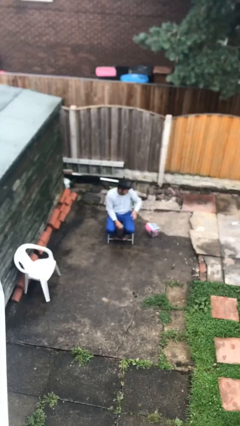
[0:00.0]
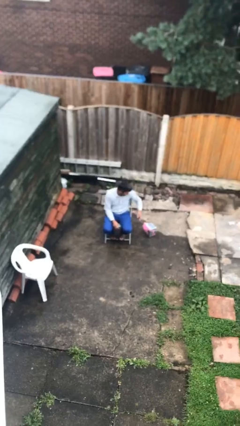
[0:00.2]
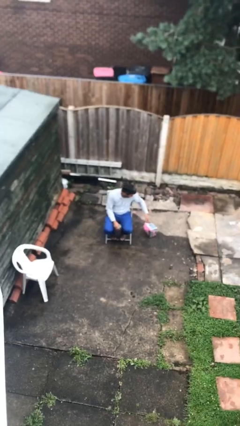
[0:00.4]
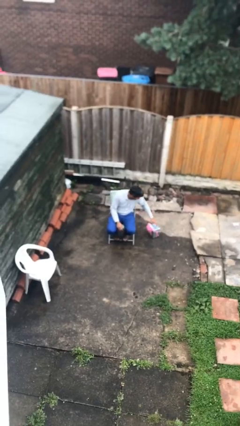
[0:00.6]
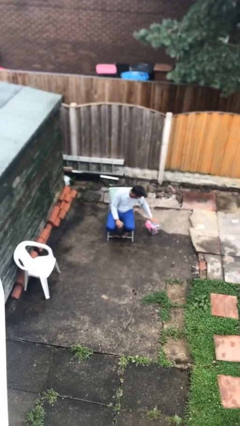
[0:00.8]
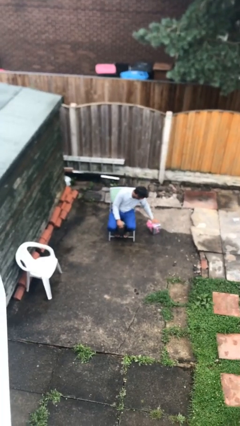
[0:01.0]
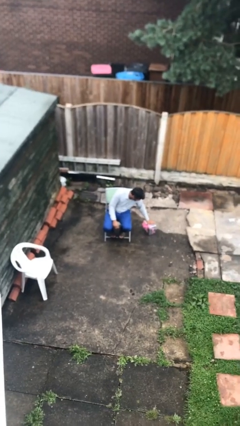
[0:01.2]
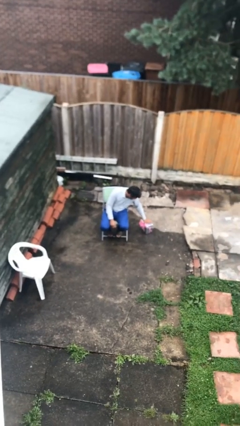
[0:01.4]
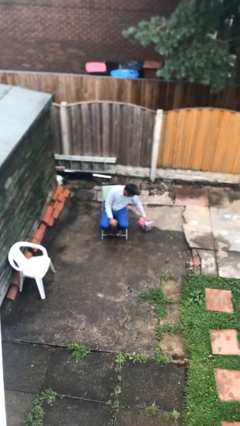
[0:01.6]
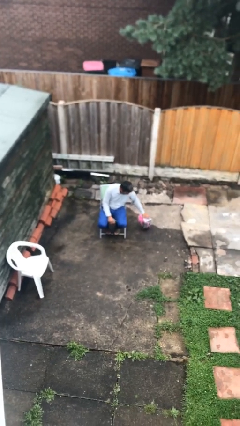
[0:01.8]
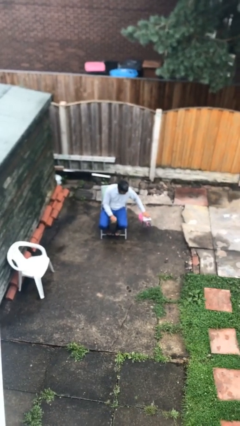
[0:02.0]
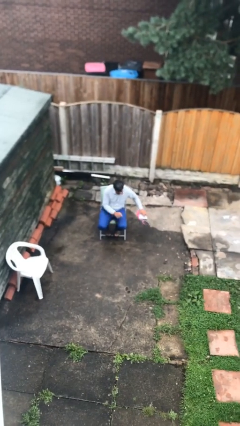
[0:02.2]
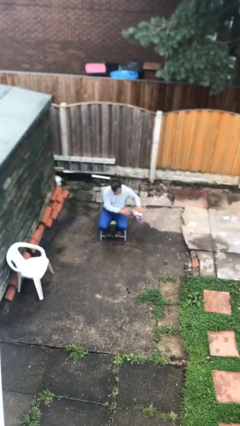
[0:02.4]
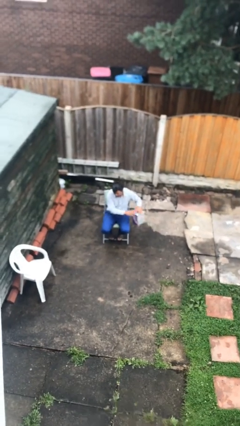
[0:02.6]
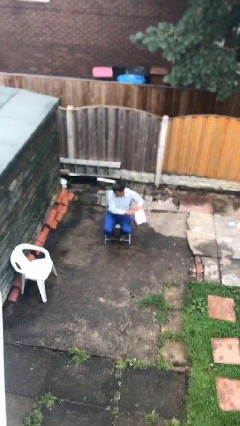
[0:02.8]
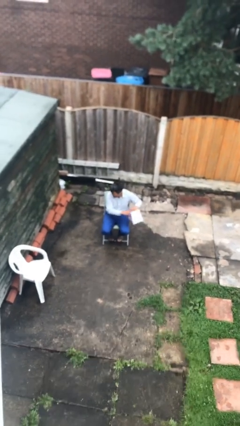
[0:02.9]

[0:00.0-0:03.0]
person picks up object from floor

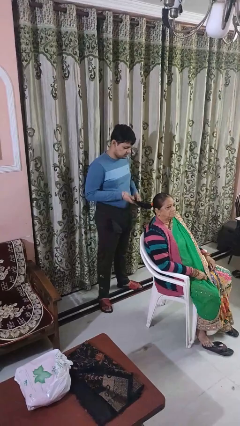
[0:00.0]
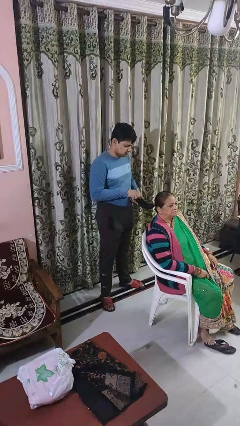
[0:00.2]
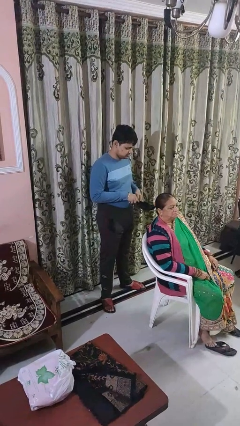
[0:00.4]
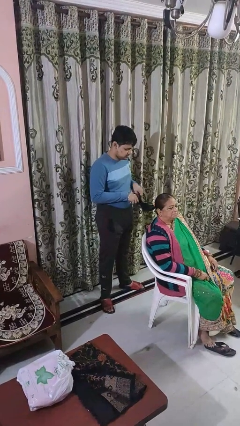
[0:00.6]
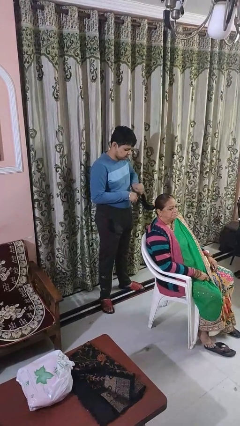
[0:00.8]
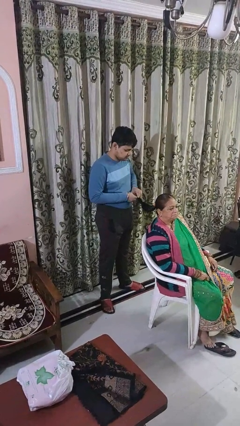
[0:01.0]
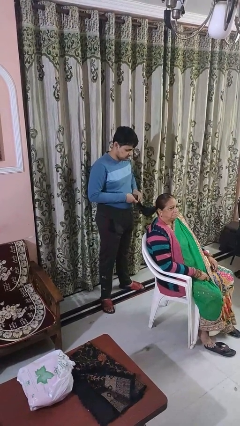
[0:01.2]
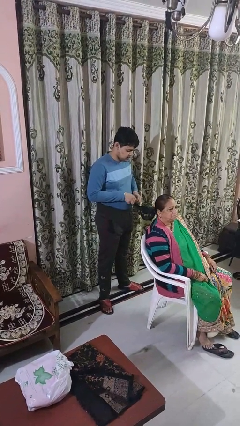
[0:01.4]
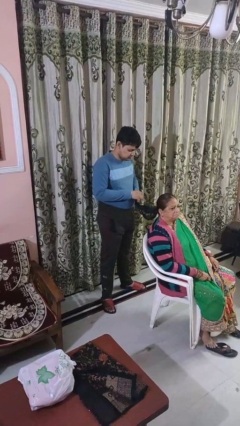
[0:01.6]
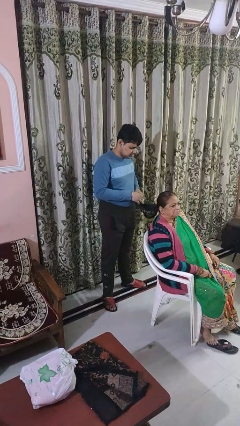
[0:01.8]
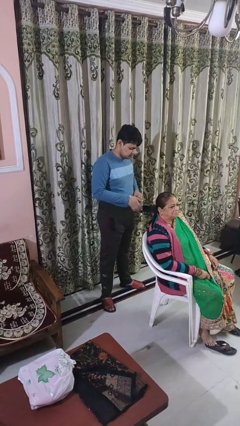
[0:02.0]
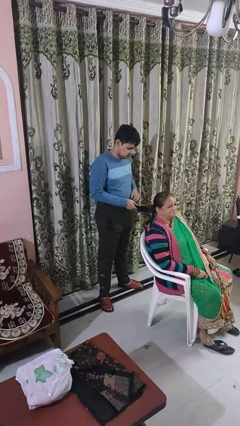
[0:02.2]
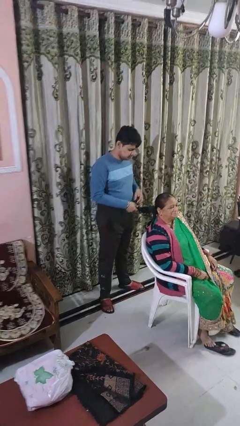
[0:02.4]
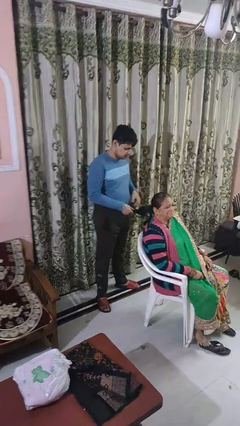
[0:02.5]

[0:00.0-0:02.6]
person braids hair of person

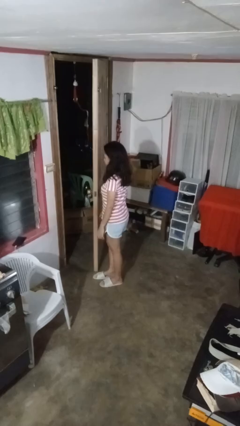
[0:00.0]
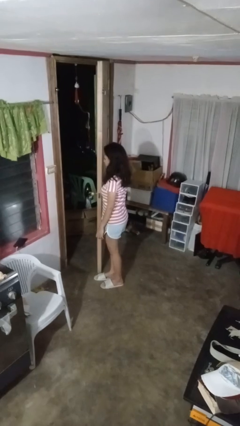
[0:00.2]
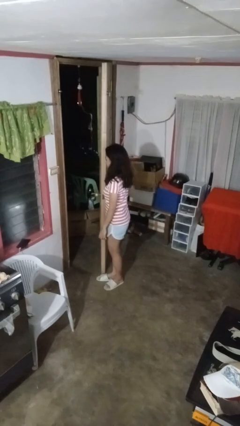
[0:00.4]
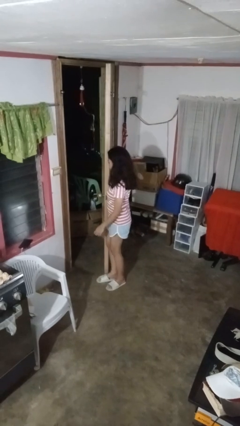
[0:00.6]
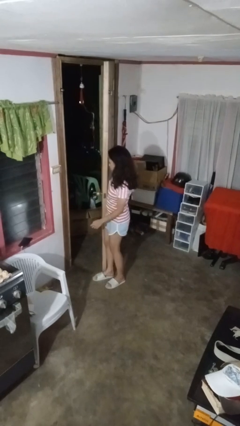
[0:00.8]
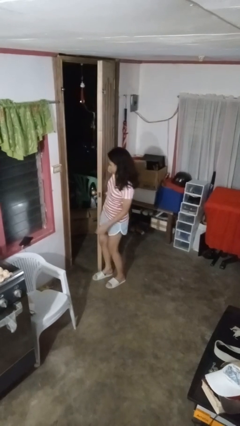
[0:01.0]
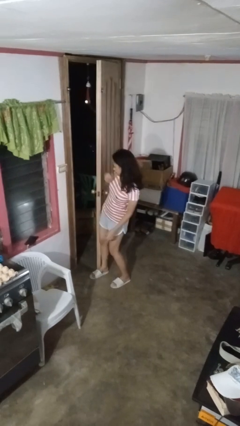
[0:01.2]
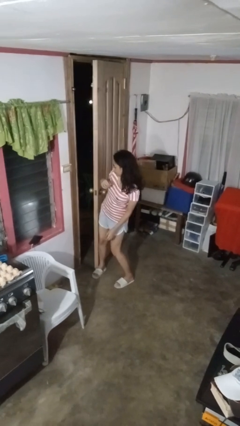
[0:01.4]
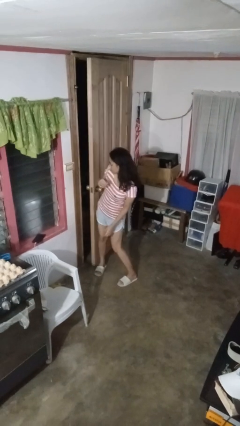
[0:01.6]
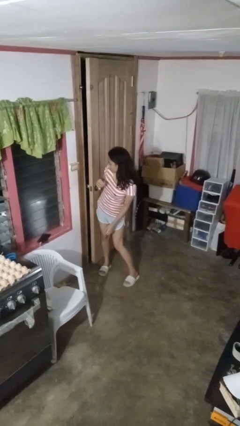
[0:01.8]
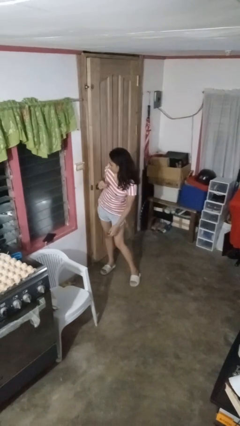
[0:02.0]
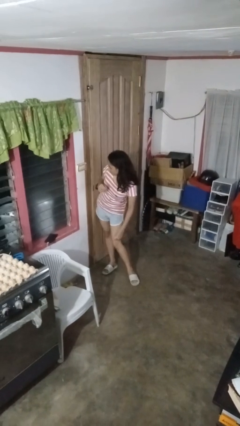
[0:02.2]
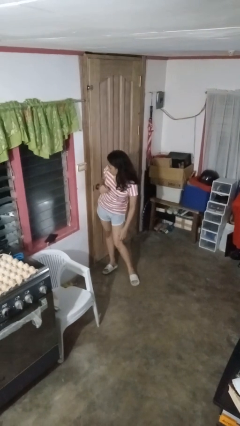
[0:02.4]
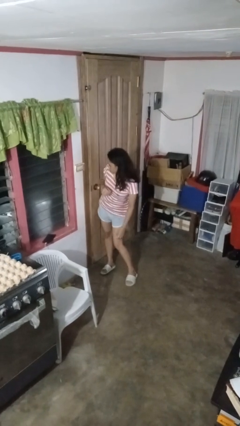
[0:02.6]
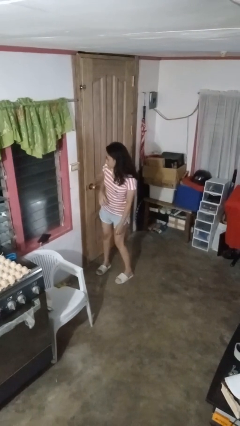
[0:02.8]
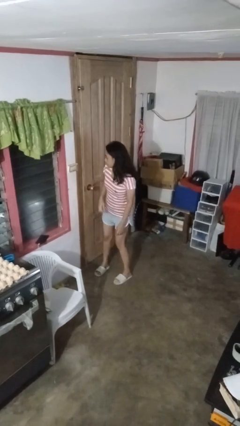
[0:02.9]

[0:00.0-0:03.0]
person closes door with hip

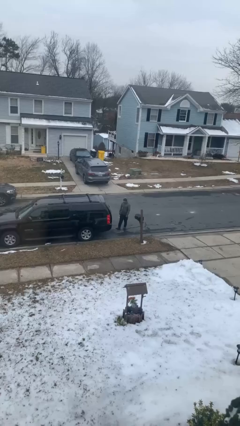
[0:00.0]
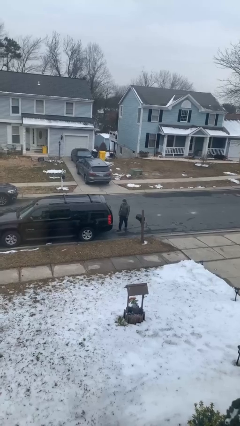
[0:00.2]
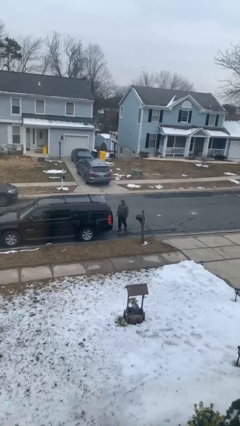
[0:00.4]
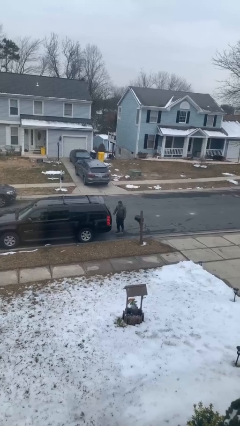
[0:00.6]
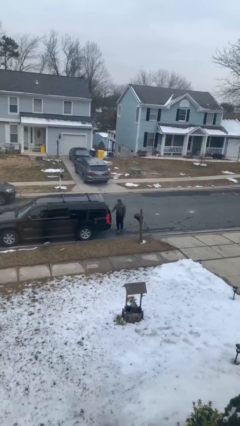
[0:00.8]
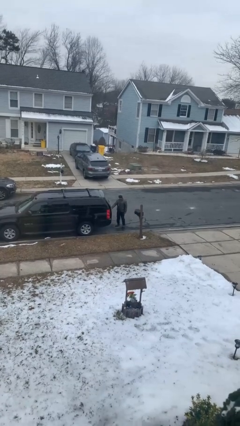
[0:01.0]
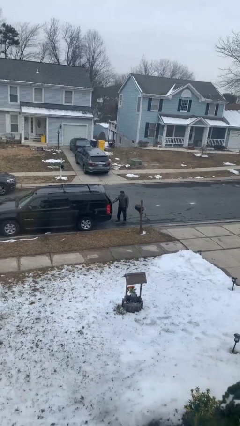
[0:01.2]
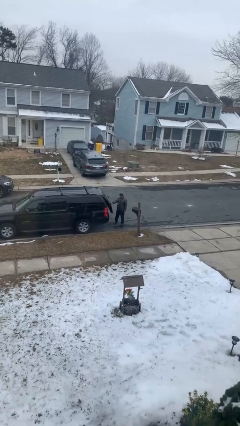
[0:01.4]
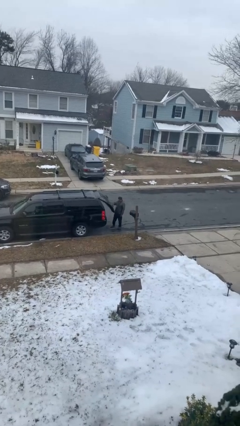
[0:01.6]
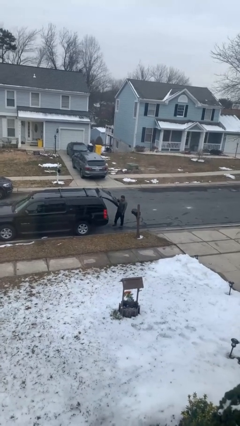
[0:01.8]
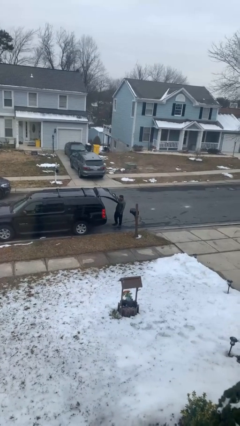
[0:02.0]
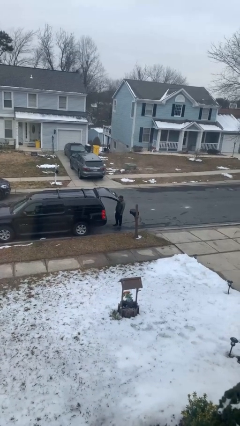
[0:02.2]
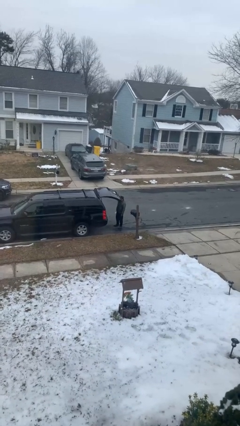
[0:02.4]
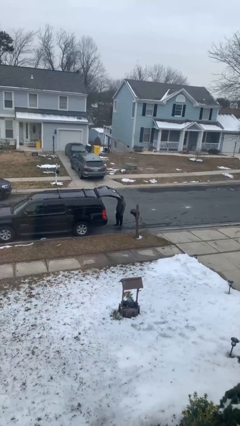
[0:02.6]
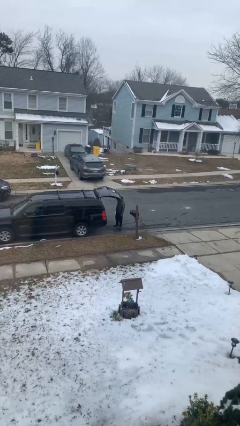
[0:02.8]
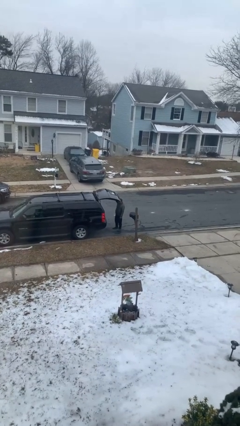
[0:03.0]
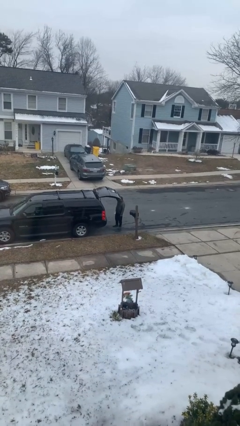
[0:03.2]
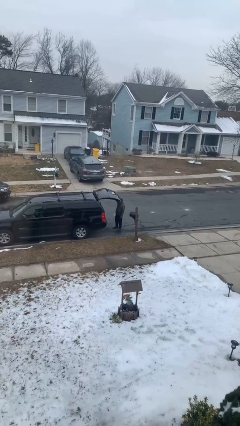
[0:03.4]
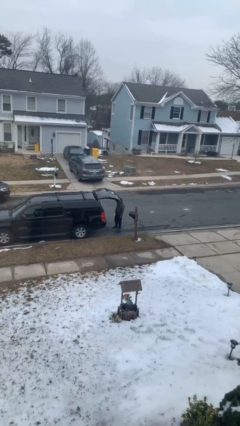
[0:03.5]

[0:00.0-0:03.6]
person opens car trunk

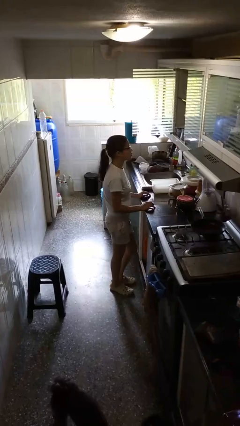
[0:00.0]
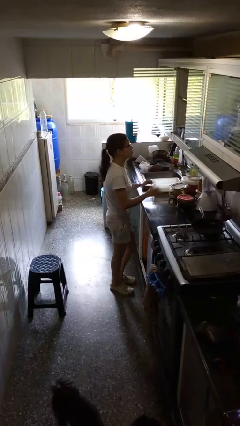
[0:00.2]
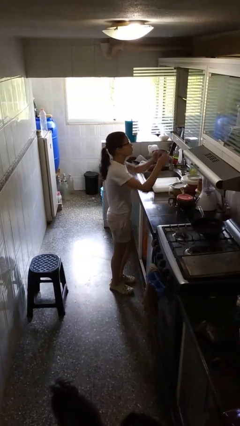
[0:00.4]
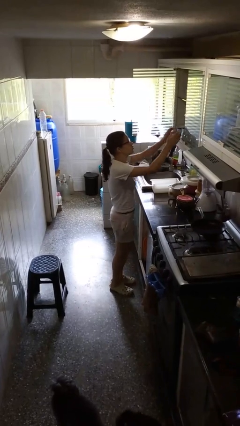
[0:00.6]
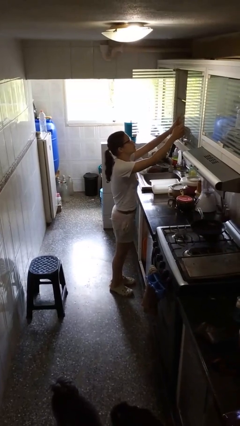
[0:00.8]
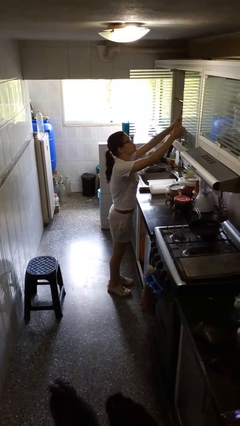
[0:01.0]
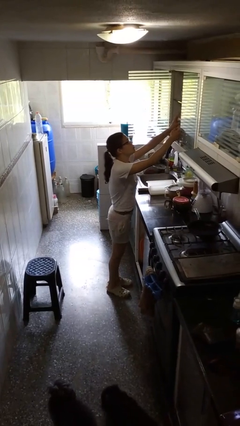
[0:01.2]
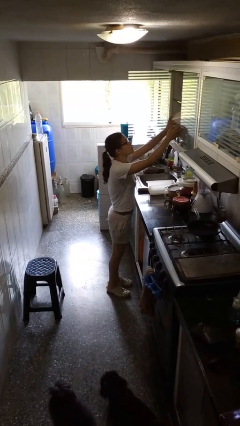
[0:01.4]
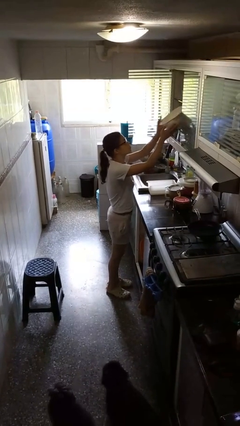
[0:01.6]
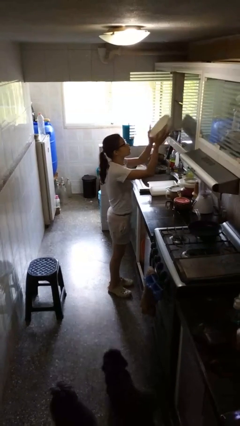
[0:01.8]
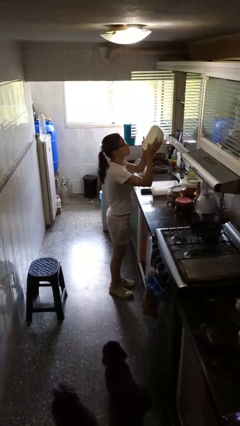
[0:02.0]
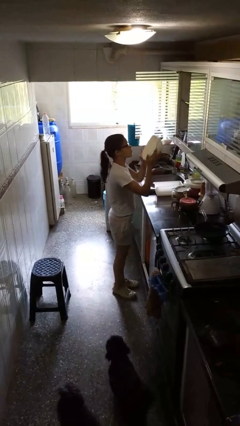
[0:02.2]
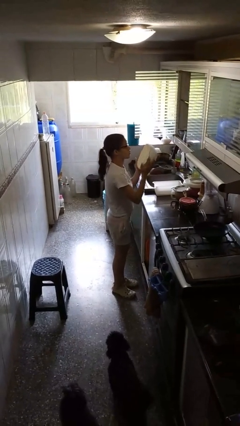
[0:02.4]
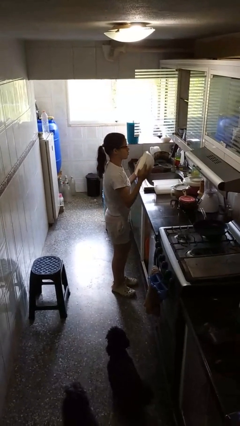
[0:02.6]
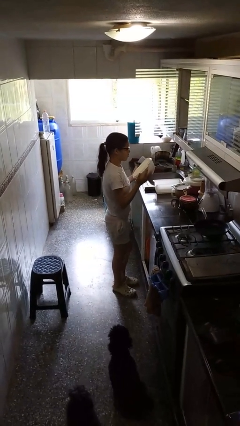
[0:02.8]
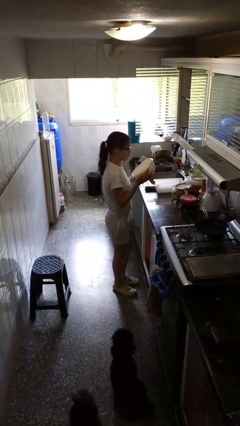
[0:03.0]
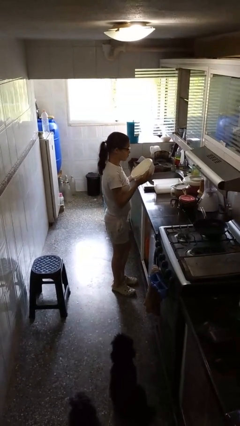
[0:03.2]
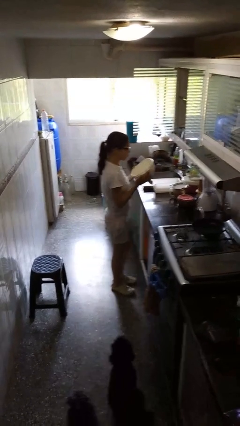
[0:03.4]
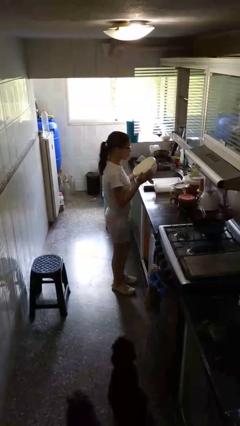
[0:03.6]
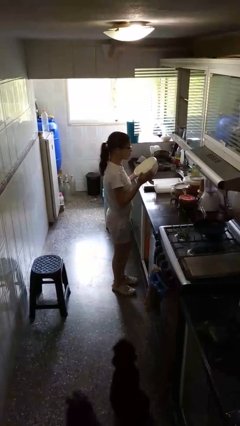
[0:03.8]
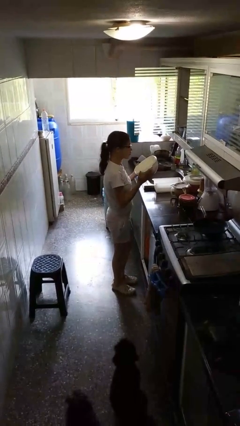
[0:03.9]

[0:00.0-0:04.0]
person picks up object from cabinet

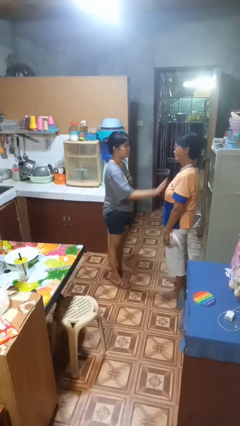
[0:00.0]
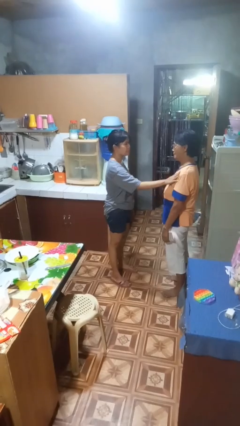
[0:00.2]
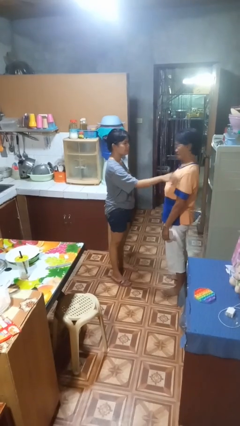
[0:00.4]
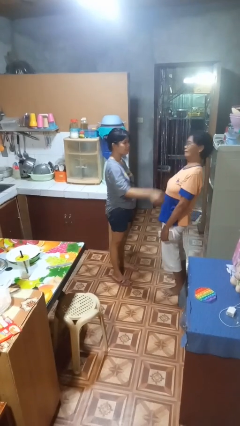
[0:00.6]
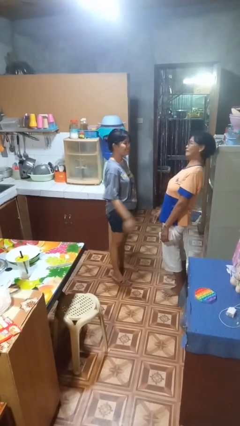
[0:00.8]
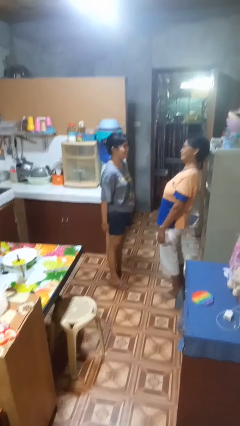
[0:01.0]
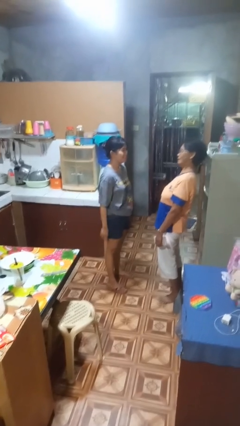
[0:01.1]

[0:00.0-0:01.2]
person shoves person

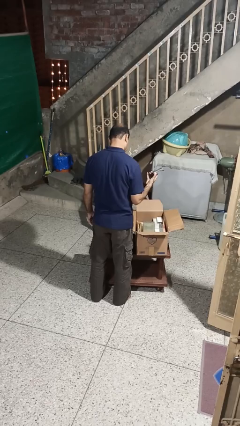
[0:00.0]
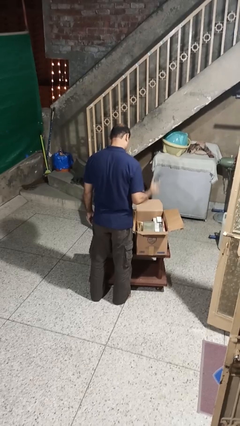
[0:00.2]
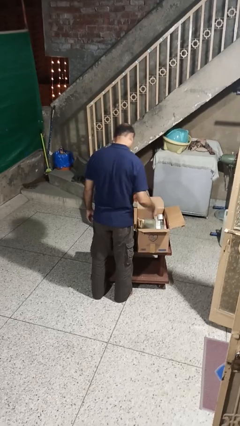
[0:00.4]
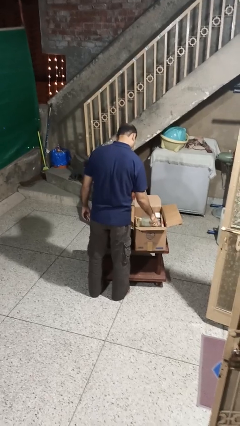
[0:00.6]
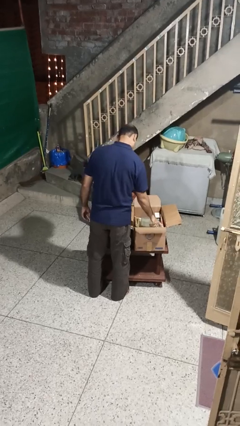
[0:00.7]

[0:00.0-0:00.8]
person puts object into box
